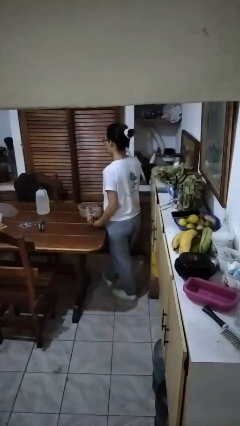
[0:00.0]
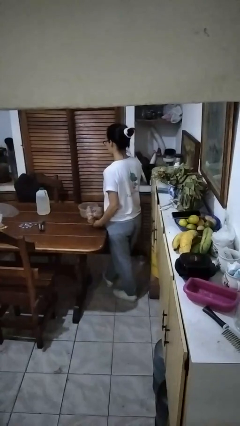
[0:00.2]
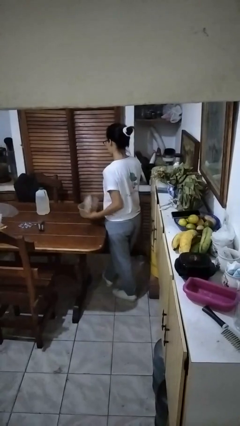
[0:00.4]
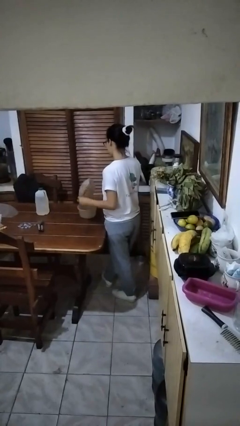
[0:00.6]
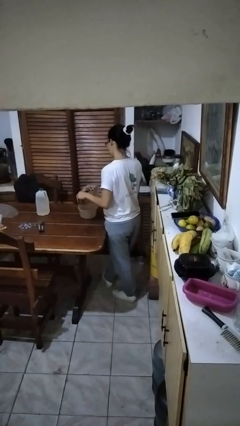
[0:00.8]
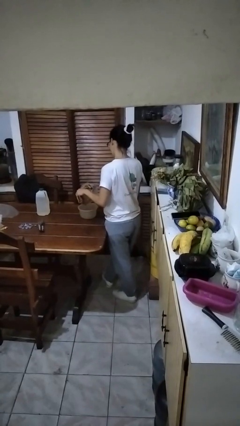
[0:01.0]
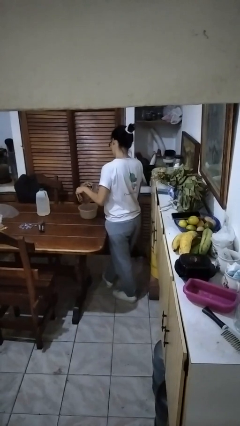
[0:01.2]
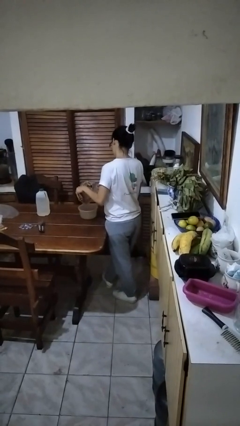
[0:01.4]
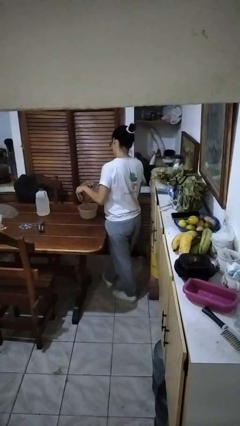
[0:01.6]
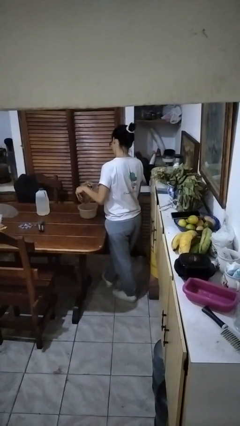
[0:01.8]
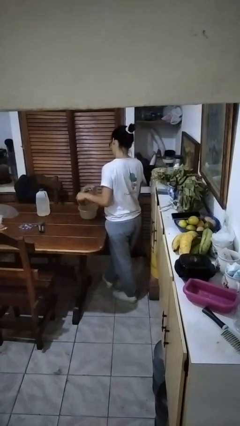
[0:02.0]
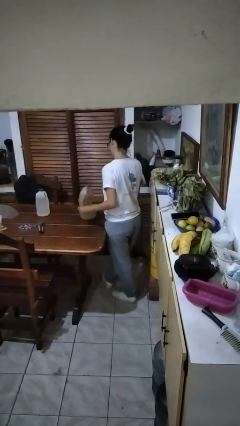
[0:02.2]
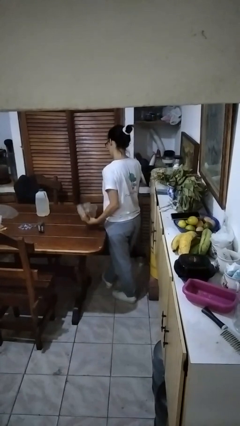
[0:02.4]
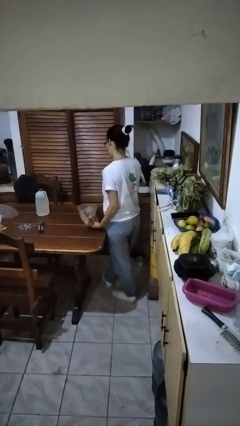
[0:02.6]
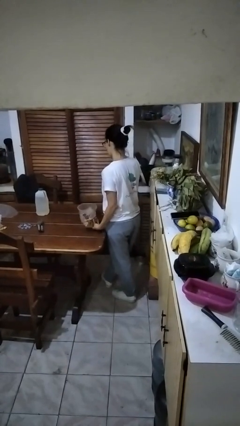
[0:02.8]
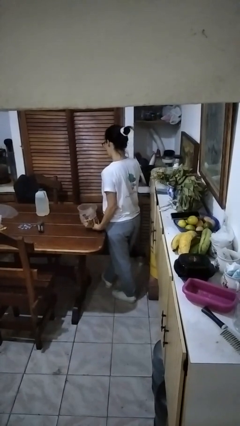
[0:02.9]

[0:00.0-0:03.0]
person pours into bowl

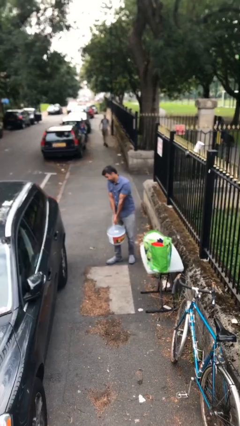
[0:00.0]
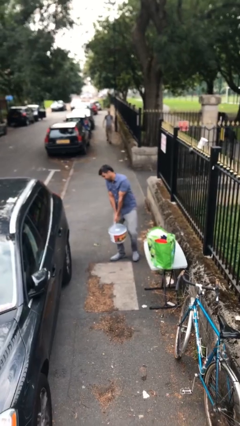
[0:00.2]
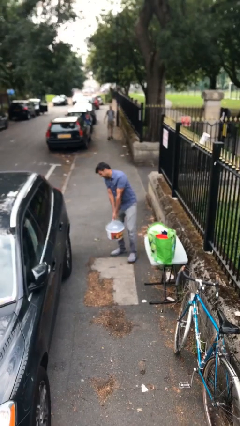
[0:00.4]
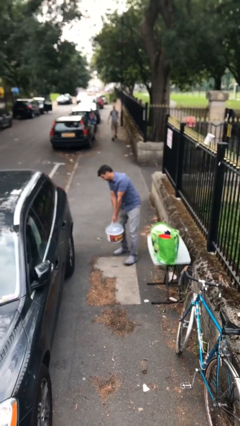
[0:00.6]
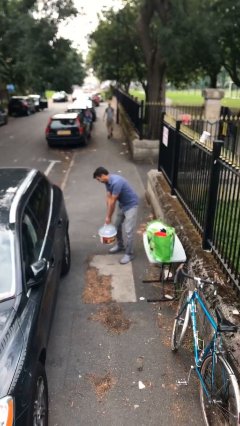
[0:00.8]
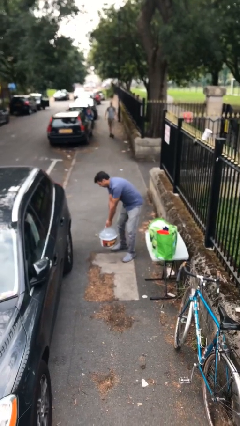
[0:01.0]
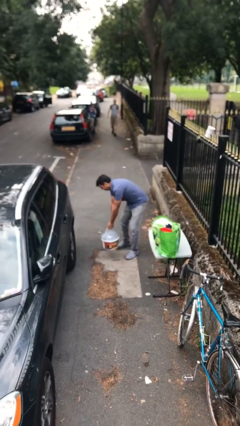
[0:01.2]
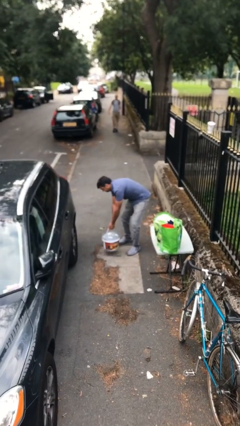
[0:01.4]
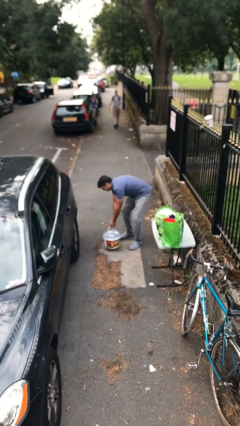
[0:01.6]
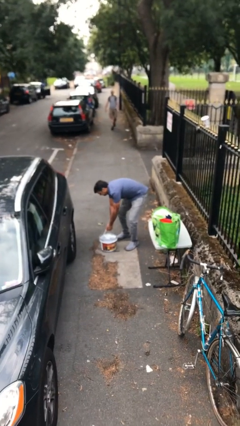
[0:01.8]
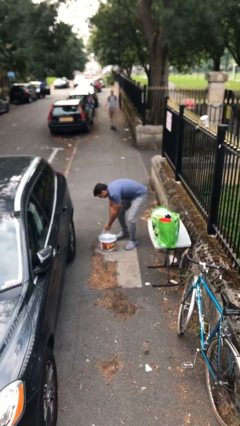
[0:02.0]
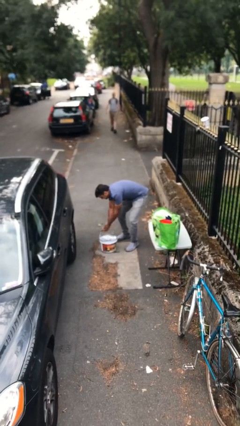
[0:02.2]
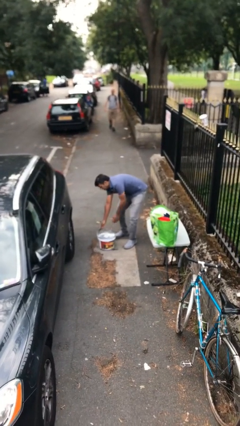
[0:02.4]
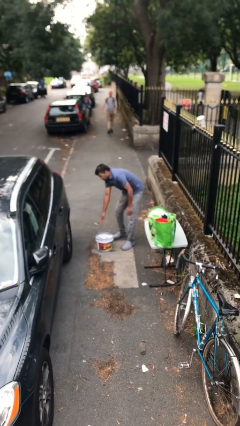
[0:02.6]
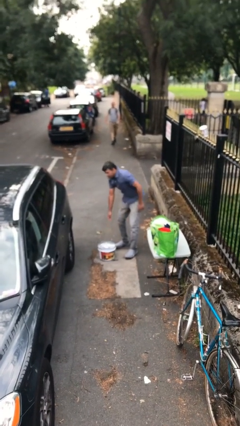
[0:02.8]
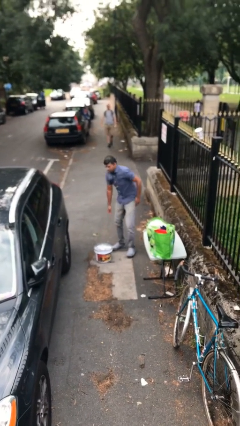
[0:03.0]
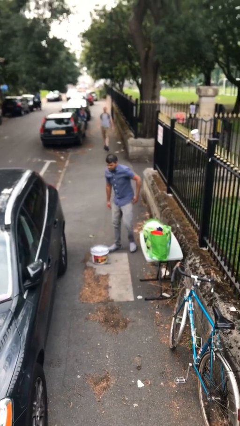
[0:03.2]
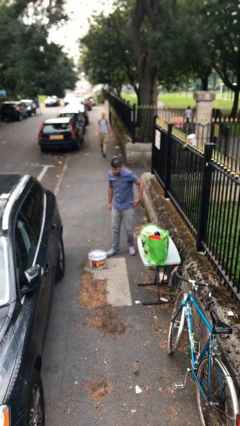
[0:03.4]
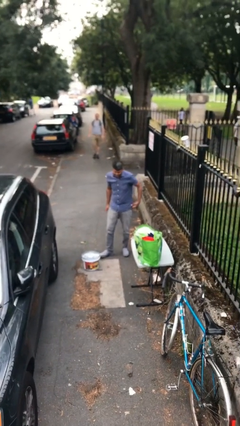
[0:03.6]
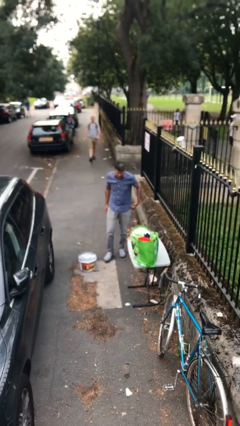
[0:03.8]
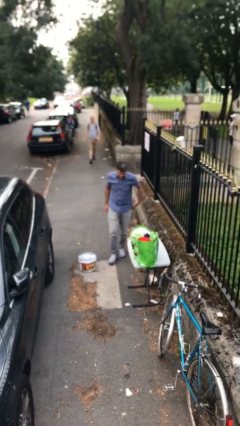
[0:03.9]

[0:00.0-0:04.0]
person puts down object on floor

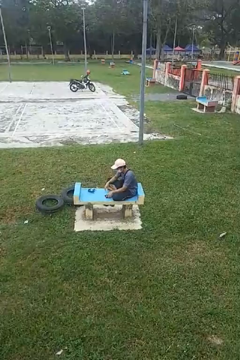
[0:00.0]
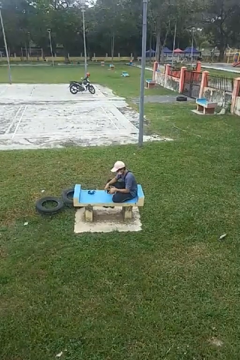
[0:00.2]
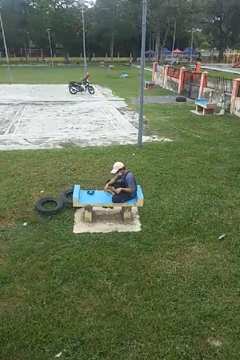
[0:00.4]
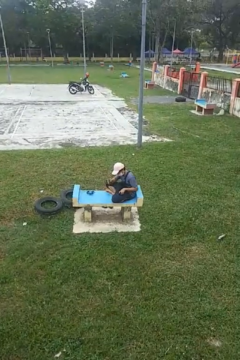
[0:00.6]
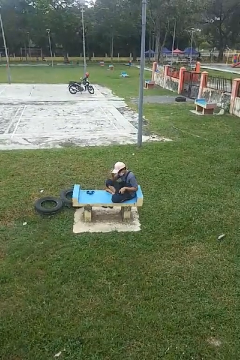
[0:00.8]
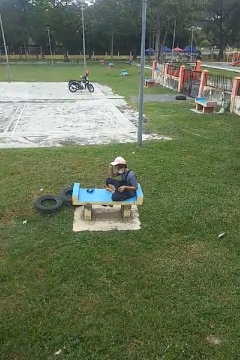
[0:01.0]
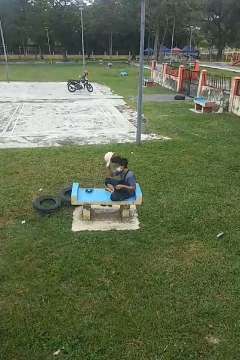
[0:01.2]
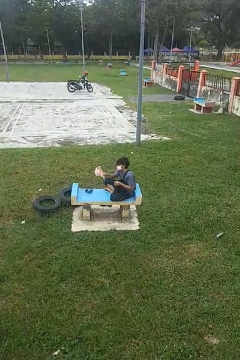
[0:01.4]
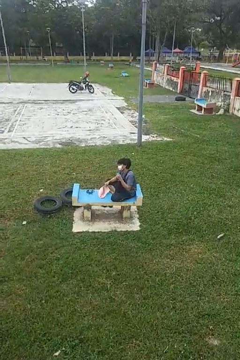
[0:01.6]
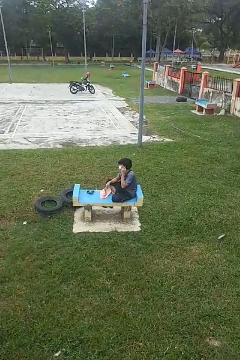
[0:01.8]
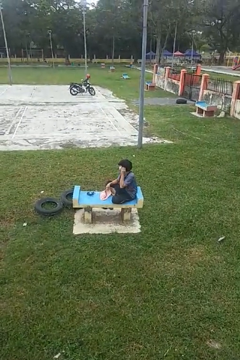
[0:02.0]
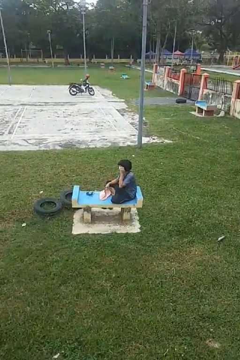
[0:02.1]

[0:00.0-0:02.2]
person takes off hat

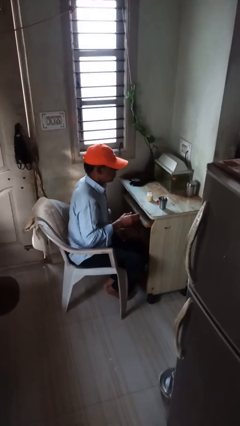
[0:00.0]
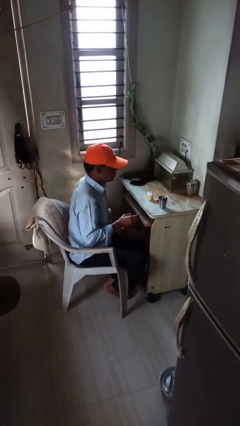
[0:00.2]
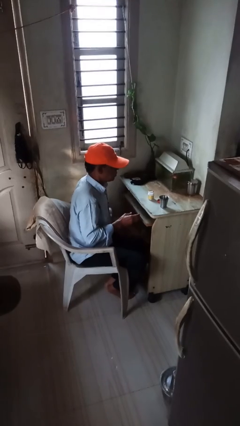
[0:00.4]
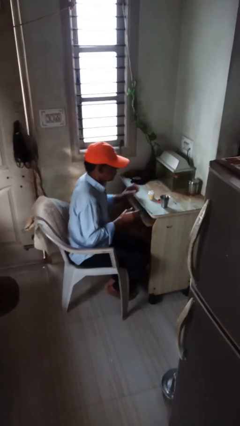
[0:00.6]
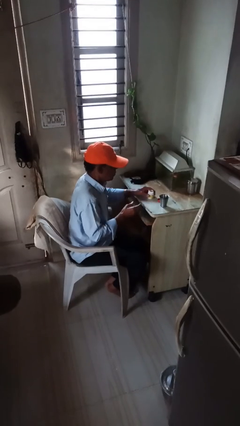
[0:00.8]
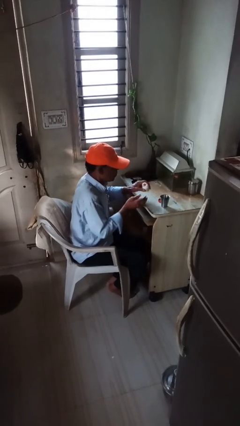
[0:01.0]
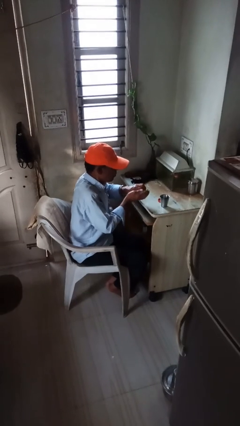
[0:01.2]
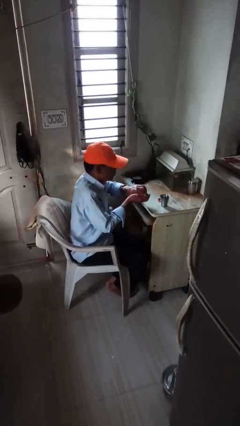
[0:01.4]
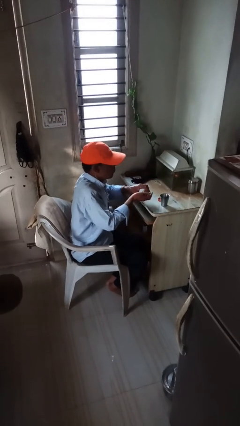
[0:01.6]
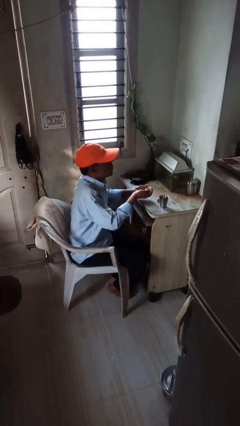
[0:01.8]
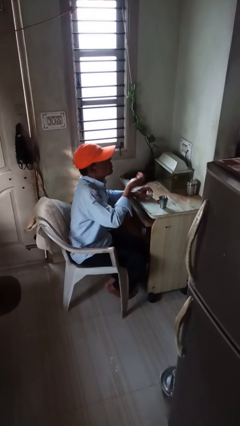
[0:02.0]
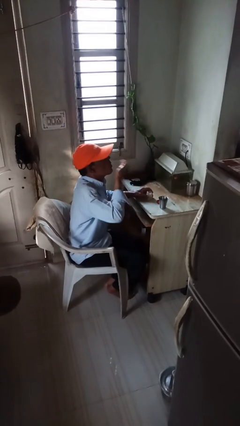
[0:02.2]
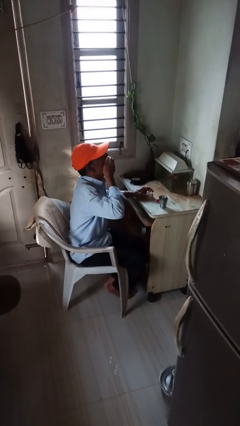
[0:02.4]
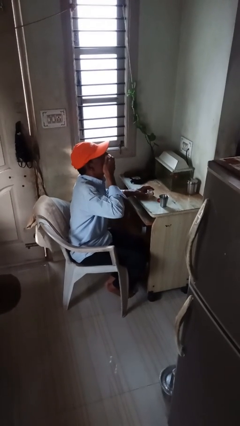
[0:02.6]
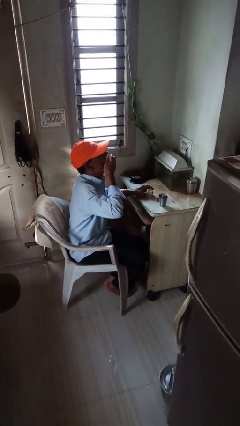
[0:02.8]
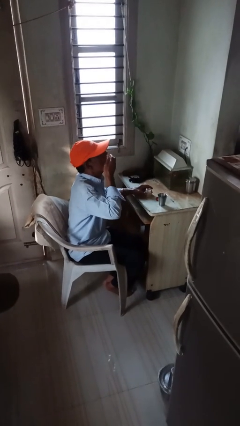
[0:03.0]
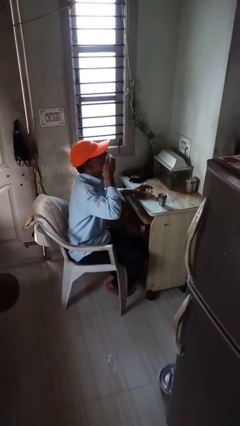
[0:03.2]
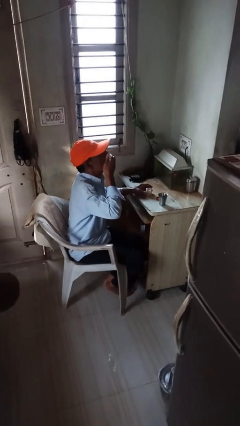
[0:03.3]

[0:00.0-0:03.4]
person takes medicine pills

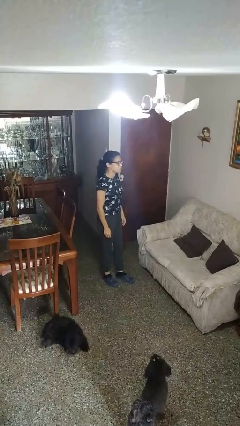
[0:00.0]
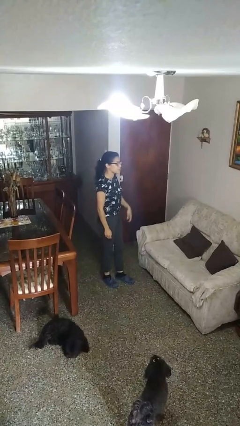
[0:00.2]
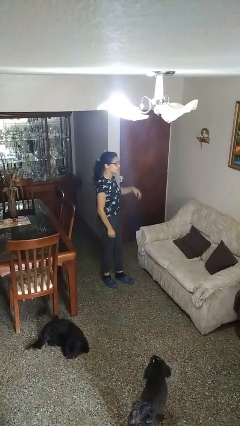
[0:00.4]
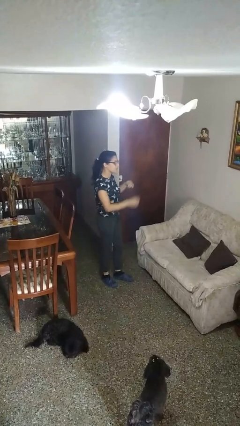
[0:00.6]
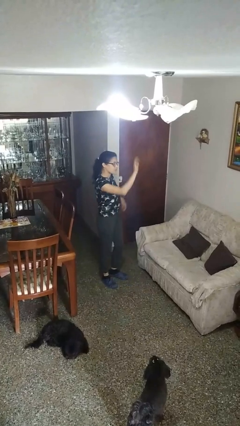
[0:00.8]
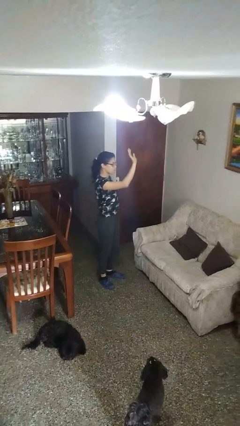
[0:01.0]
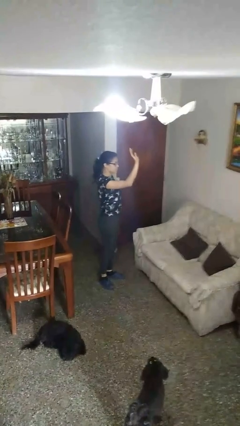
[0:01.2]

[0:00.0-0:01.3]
person gestures lower hand

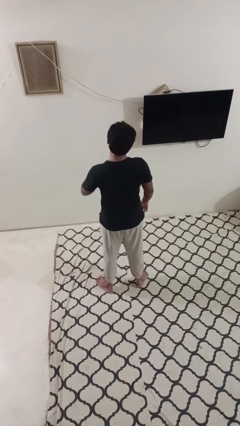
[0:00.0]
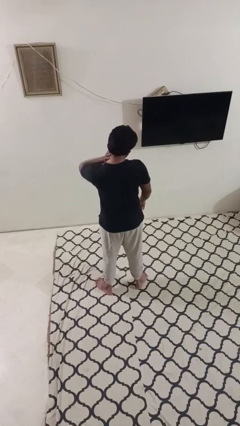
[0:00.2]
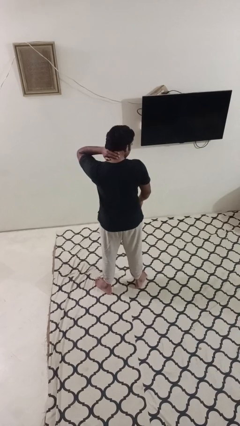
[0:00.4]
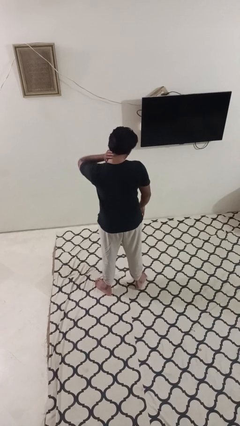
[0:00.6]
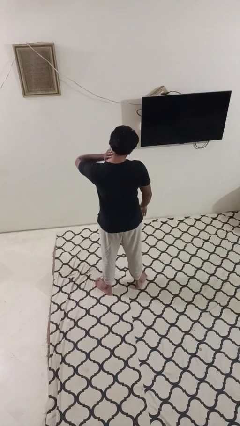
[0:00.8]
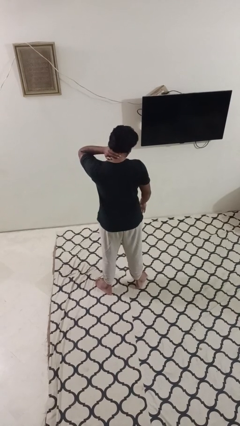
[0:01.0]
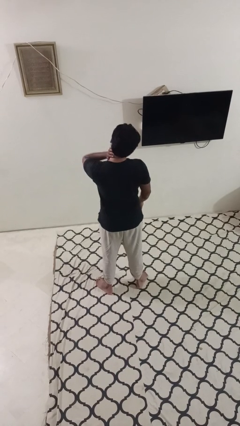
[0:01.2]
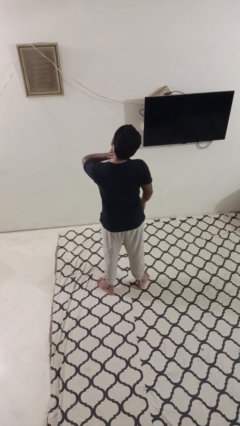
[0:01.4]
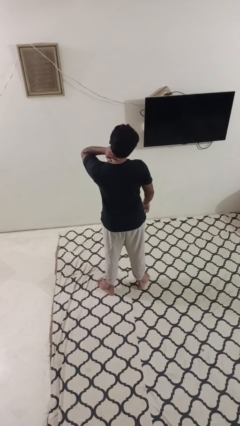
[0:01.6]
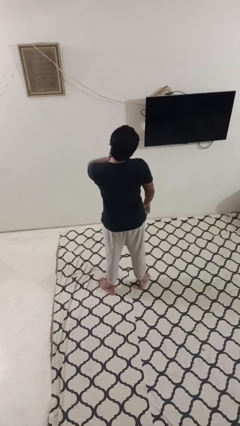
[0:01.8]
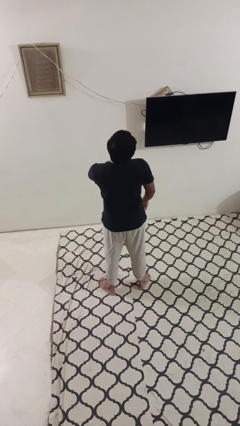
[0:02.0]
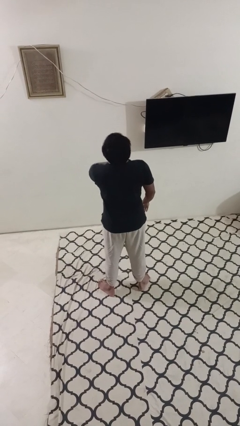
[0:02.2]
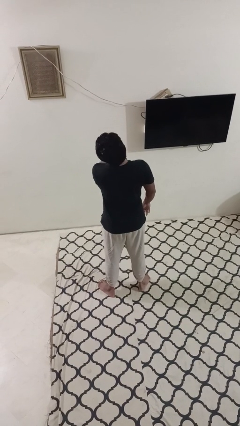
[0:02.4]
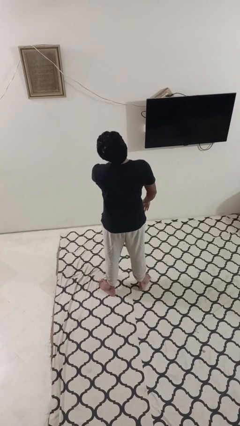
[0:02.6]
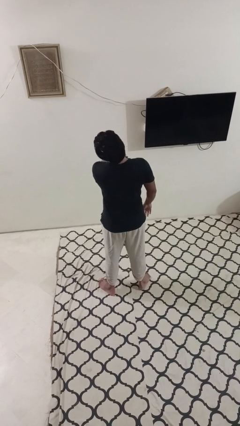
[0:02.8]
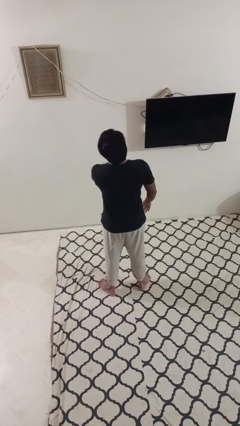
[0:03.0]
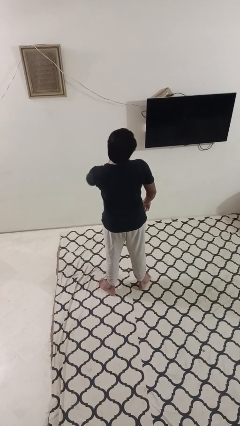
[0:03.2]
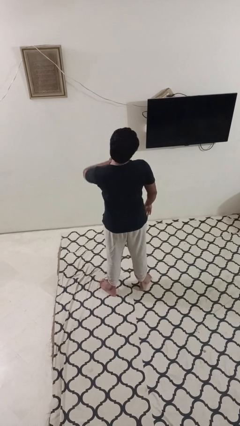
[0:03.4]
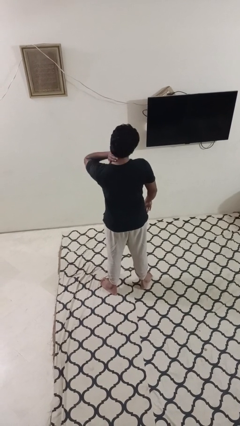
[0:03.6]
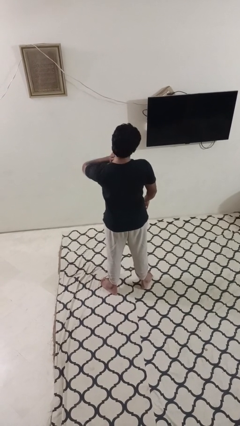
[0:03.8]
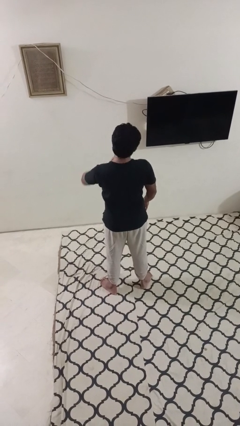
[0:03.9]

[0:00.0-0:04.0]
person rubs neck
